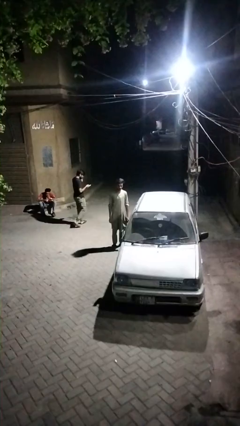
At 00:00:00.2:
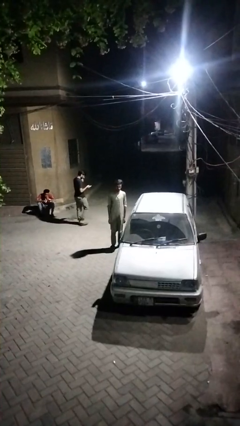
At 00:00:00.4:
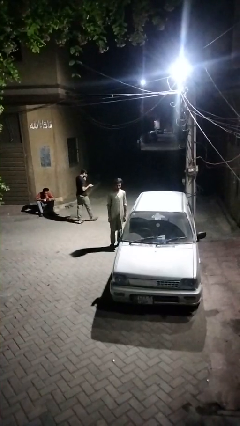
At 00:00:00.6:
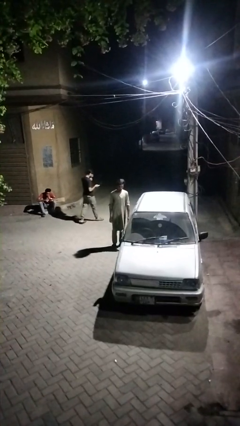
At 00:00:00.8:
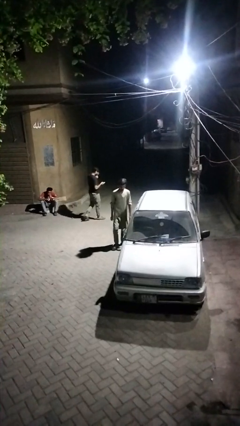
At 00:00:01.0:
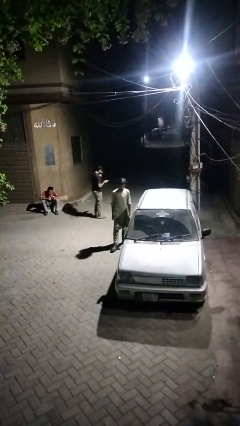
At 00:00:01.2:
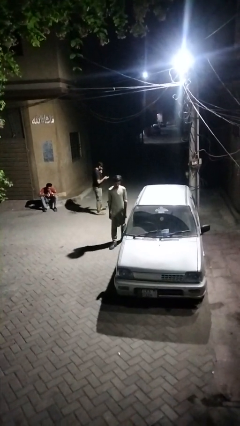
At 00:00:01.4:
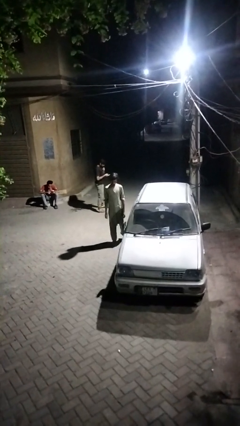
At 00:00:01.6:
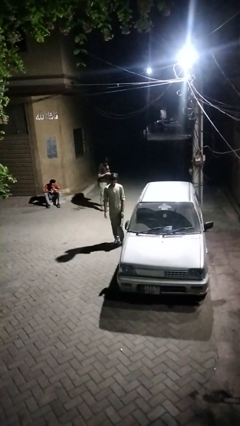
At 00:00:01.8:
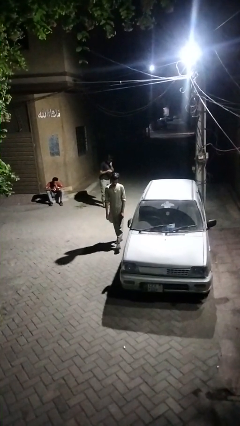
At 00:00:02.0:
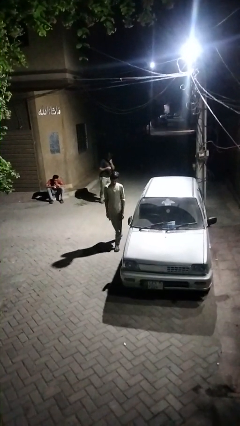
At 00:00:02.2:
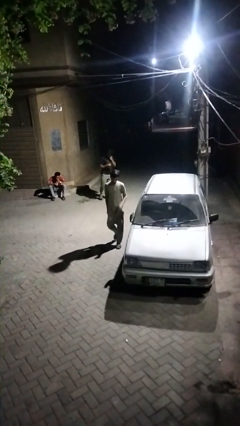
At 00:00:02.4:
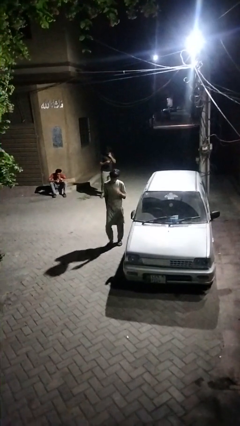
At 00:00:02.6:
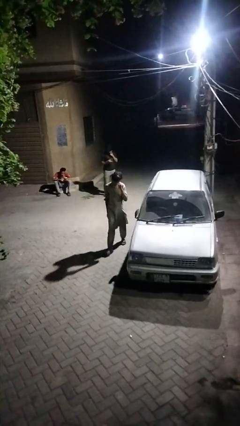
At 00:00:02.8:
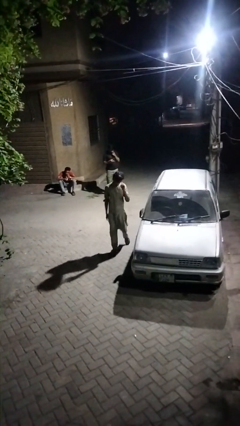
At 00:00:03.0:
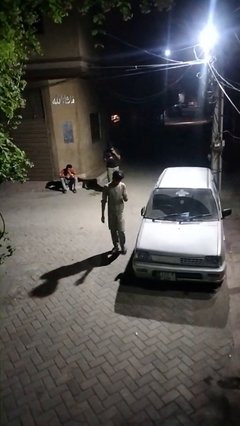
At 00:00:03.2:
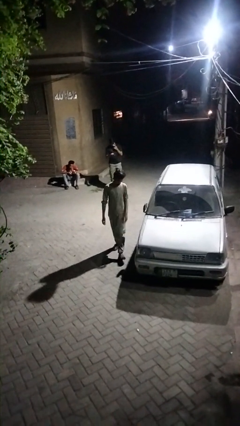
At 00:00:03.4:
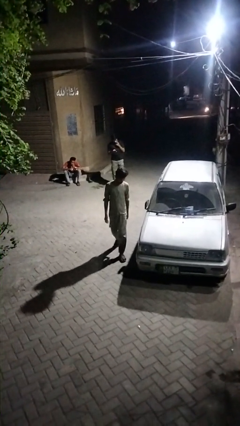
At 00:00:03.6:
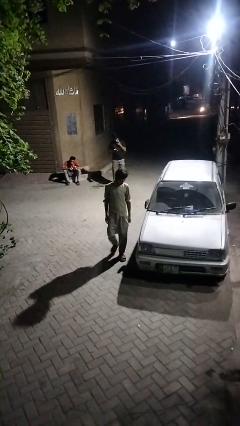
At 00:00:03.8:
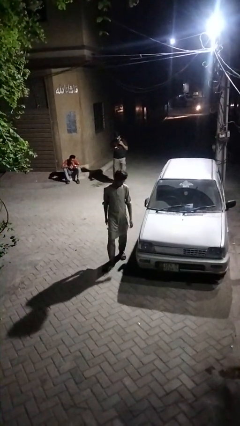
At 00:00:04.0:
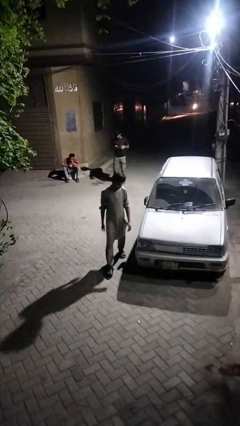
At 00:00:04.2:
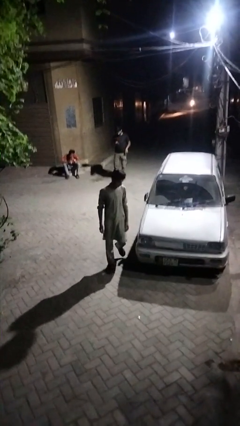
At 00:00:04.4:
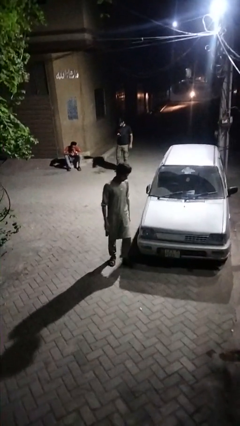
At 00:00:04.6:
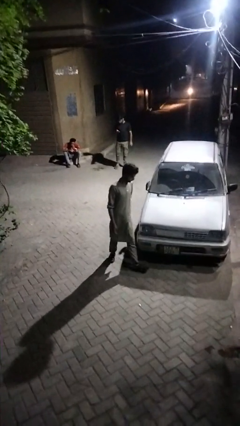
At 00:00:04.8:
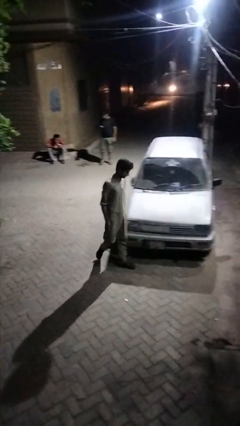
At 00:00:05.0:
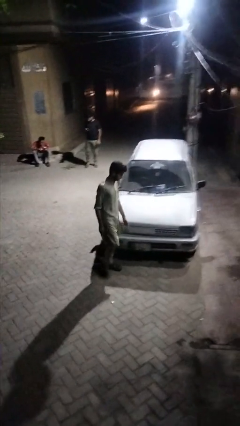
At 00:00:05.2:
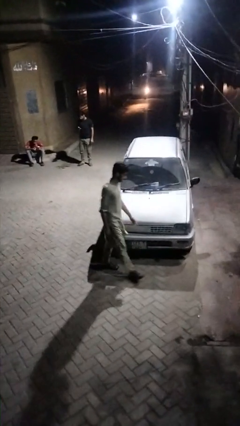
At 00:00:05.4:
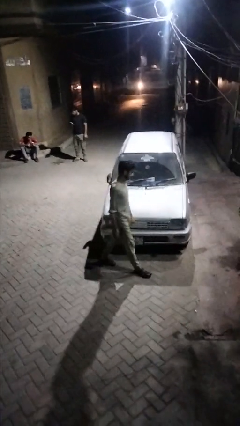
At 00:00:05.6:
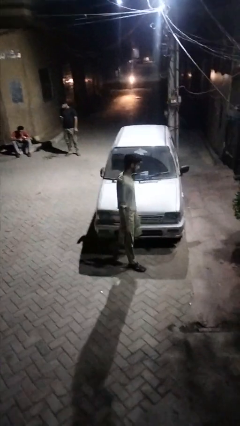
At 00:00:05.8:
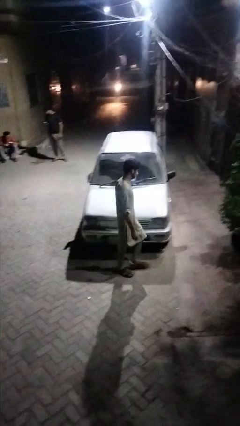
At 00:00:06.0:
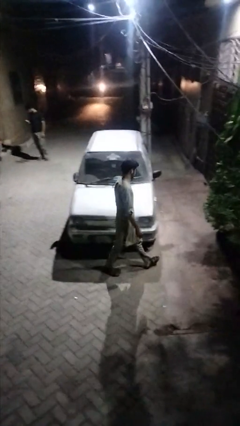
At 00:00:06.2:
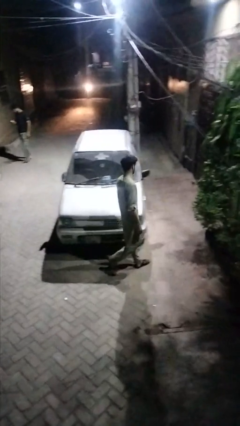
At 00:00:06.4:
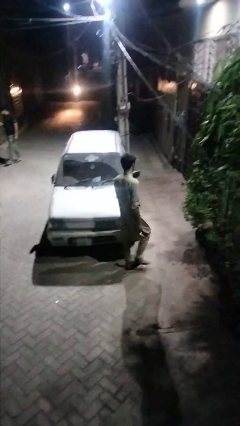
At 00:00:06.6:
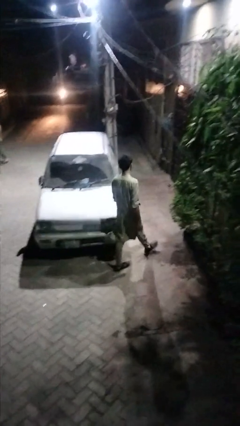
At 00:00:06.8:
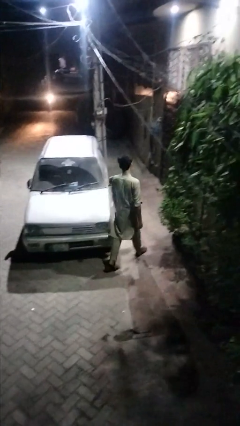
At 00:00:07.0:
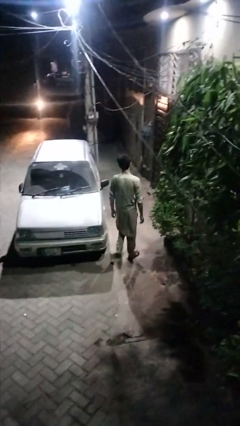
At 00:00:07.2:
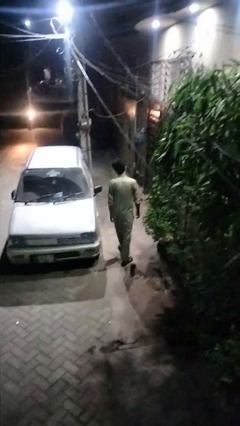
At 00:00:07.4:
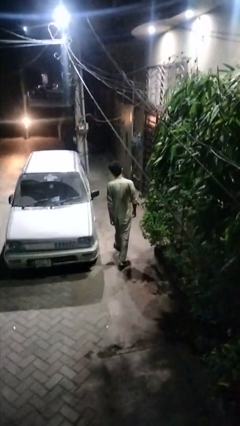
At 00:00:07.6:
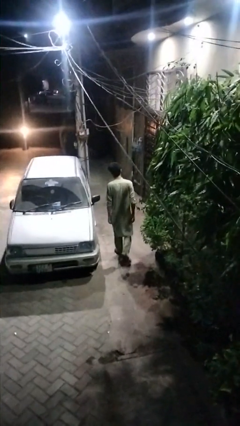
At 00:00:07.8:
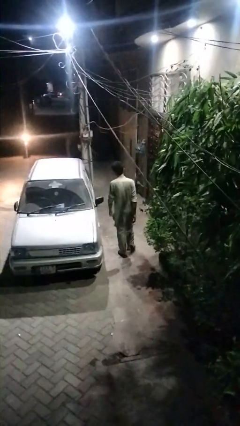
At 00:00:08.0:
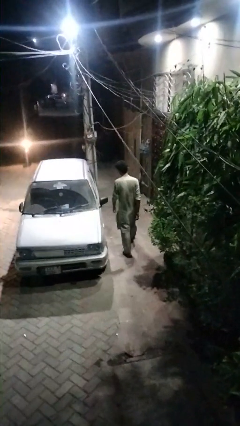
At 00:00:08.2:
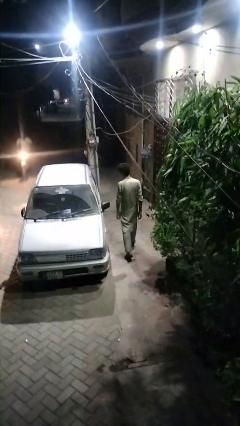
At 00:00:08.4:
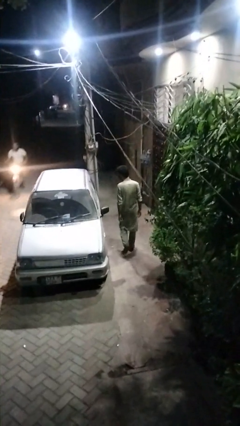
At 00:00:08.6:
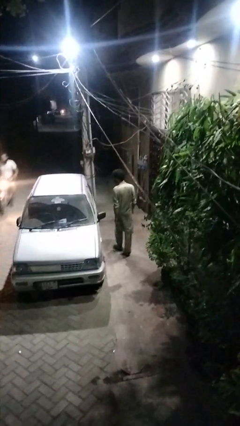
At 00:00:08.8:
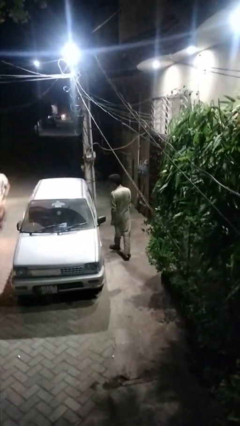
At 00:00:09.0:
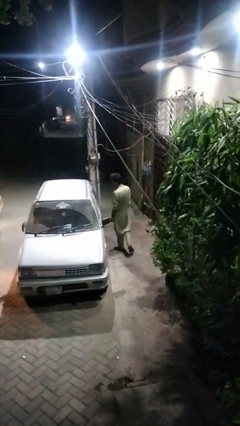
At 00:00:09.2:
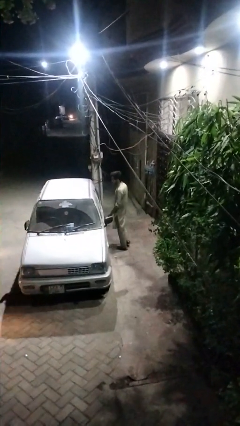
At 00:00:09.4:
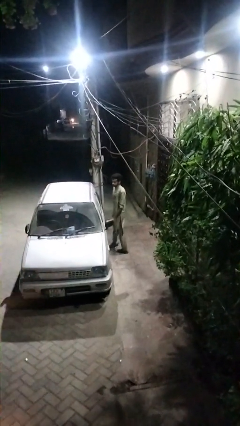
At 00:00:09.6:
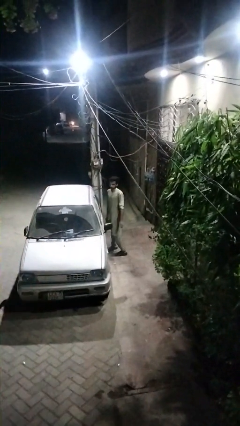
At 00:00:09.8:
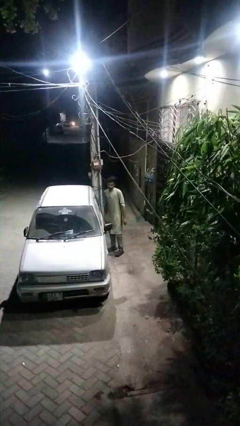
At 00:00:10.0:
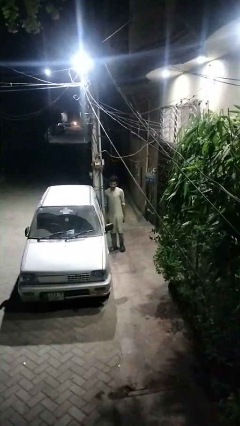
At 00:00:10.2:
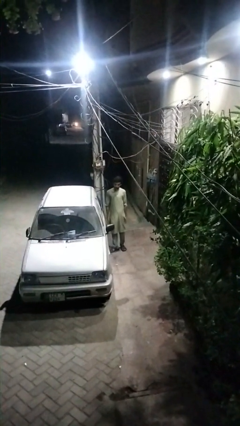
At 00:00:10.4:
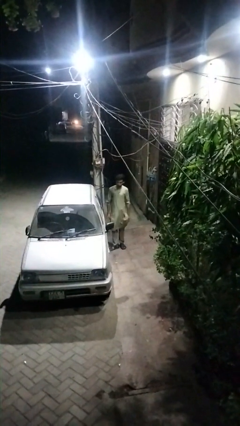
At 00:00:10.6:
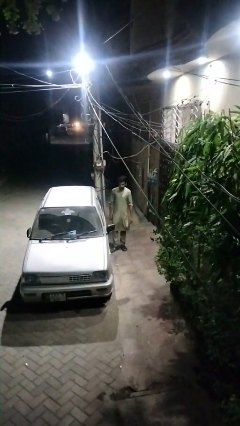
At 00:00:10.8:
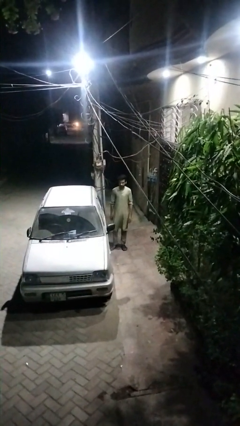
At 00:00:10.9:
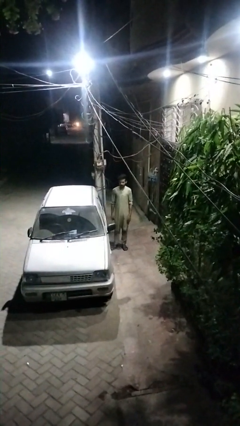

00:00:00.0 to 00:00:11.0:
person walks around car

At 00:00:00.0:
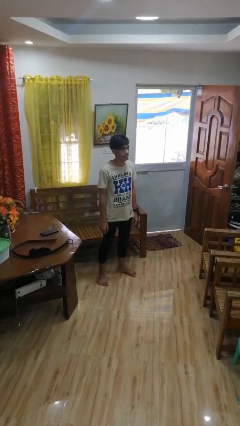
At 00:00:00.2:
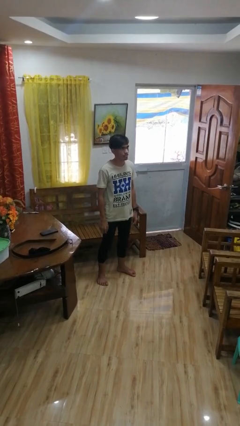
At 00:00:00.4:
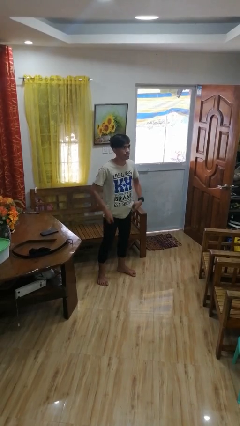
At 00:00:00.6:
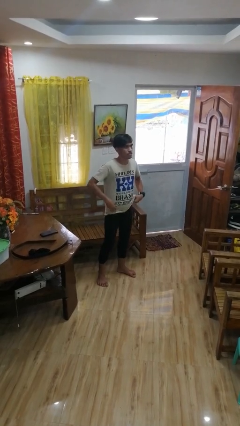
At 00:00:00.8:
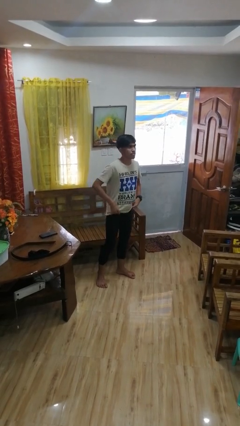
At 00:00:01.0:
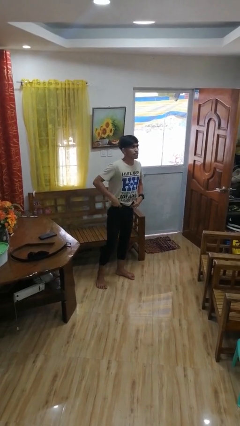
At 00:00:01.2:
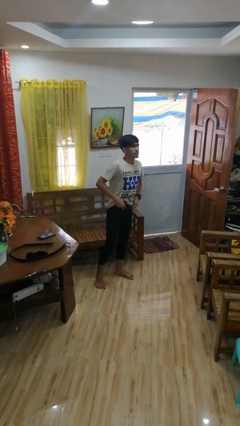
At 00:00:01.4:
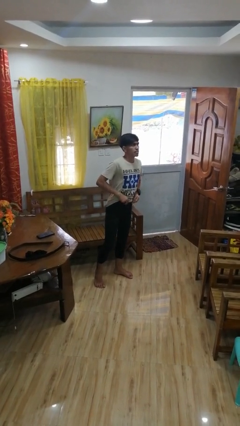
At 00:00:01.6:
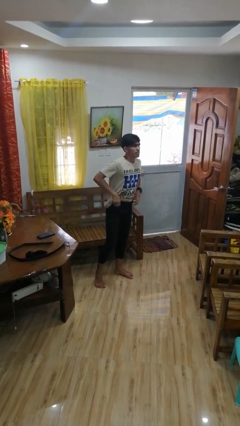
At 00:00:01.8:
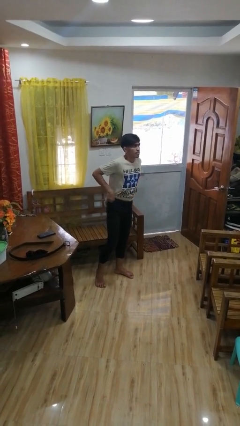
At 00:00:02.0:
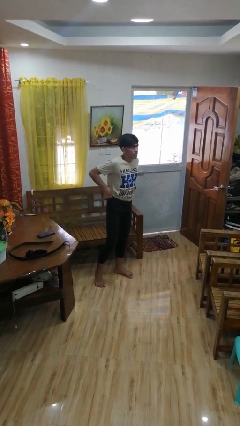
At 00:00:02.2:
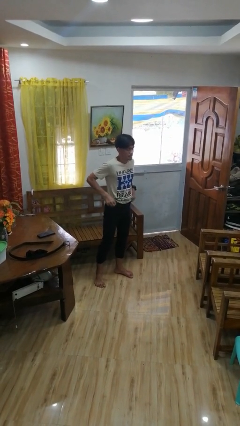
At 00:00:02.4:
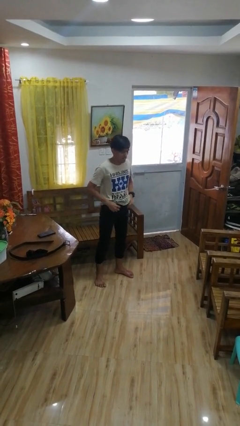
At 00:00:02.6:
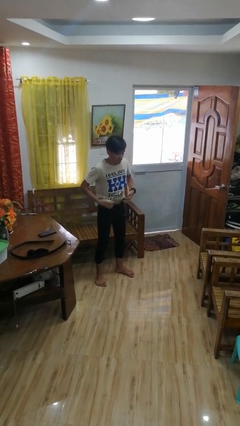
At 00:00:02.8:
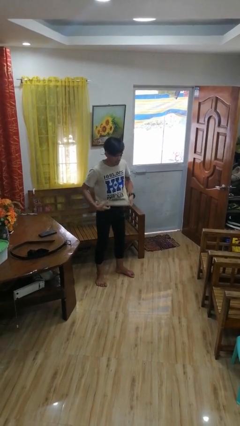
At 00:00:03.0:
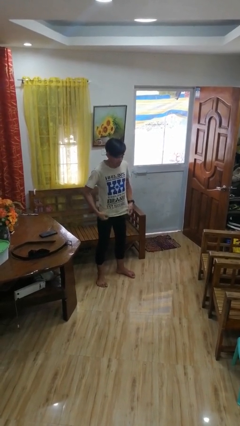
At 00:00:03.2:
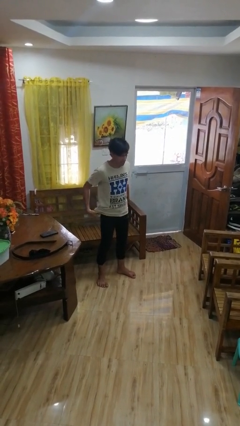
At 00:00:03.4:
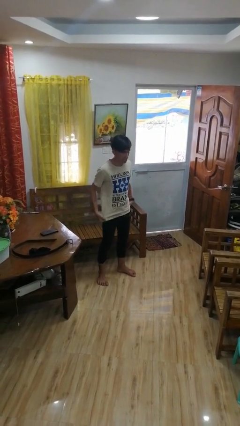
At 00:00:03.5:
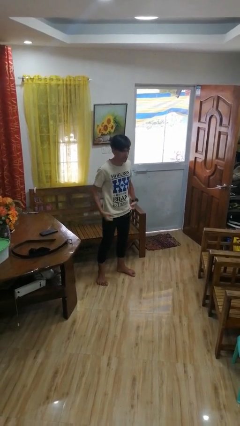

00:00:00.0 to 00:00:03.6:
person hikes up pants

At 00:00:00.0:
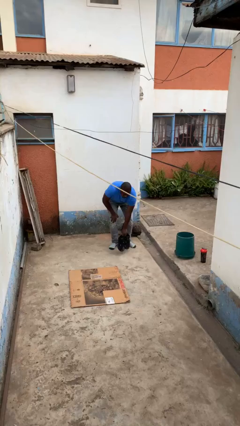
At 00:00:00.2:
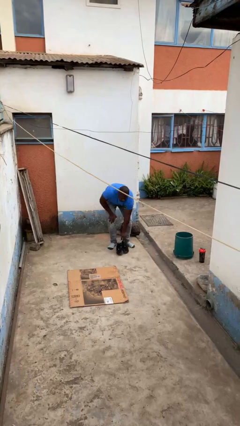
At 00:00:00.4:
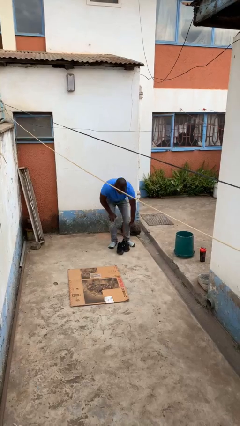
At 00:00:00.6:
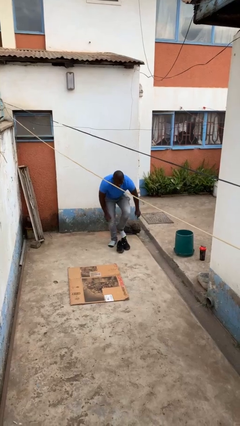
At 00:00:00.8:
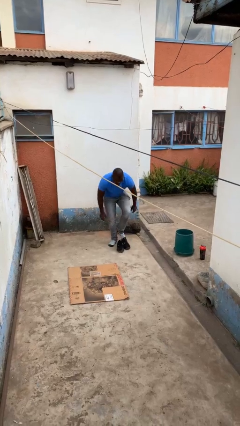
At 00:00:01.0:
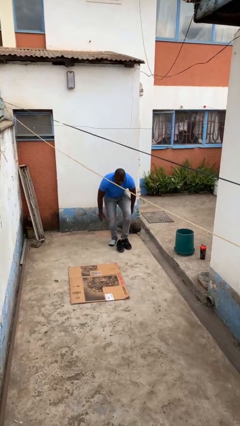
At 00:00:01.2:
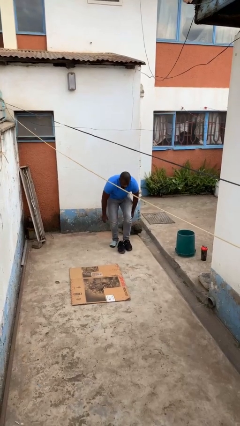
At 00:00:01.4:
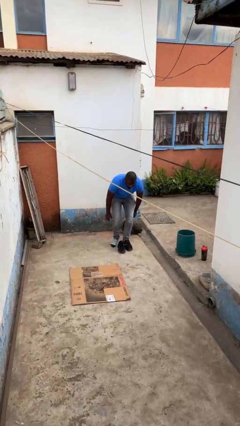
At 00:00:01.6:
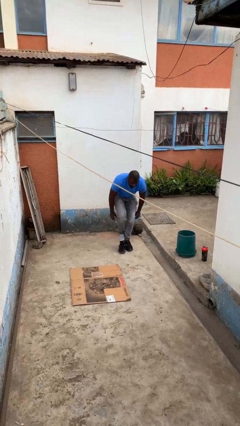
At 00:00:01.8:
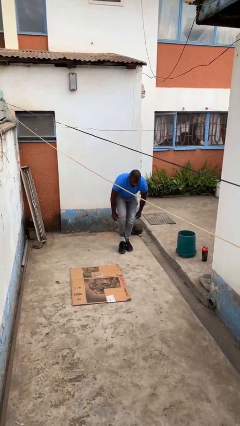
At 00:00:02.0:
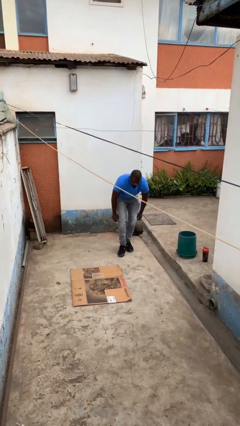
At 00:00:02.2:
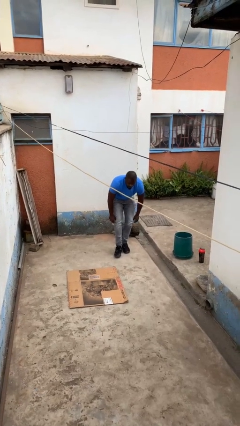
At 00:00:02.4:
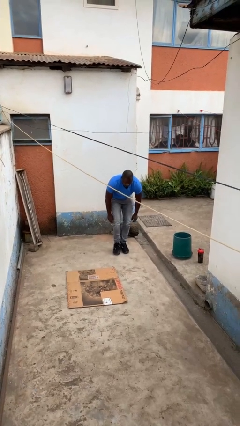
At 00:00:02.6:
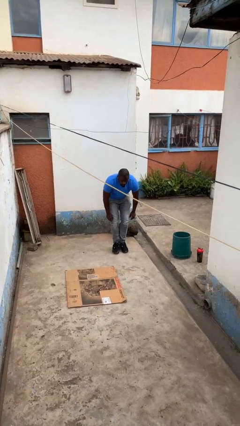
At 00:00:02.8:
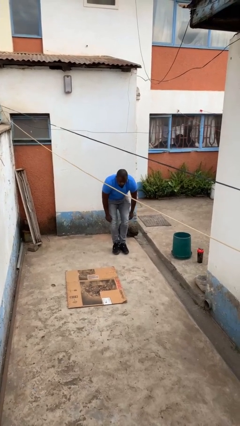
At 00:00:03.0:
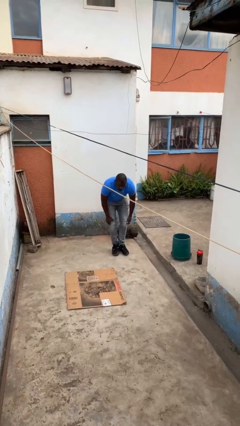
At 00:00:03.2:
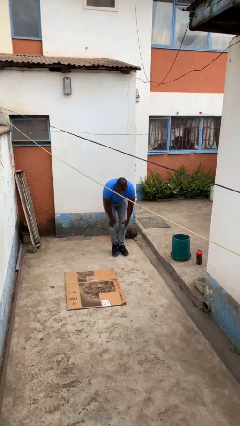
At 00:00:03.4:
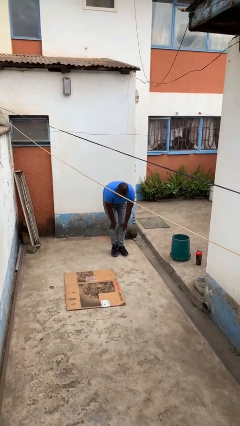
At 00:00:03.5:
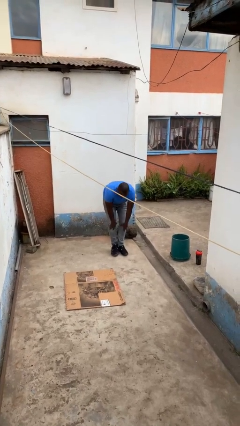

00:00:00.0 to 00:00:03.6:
person puts on shoes
